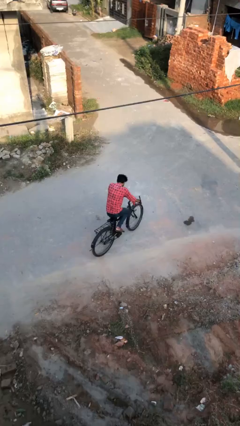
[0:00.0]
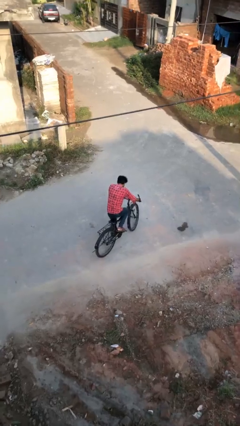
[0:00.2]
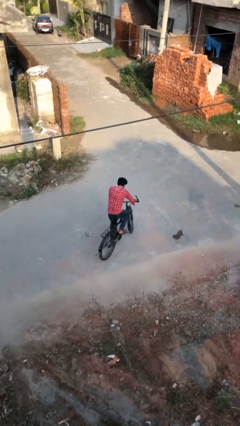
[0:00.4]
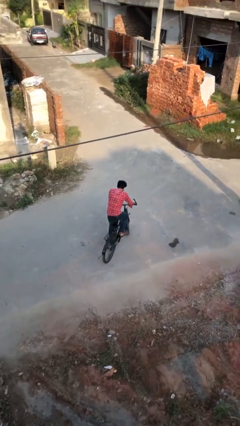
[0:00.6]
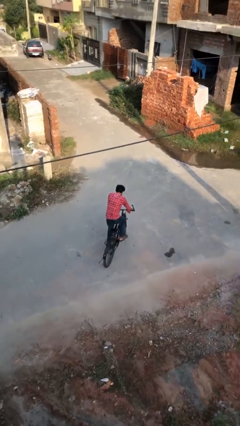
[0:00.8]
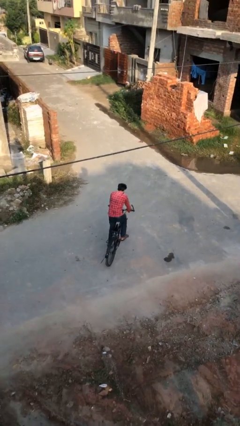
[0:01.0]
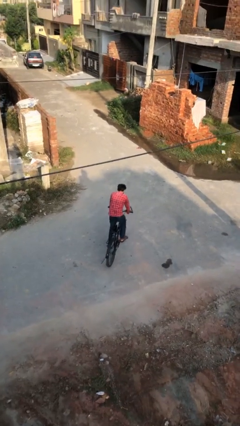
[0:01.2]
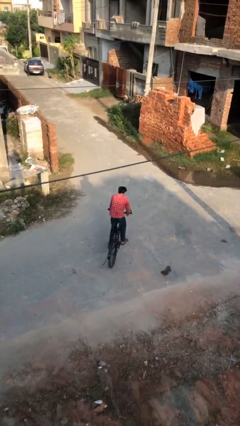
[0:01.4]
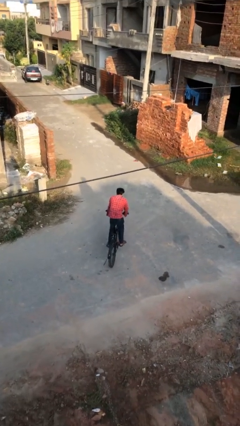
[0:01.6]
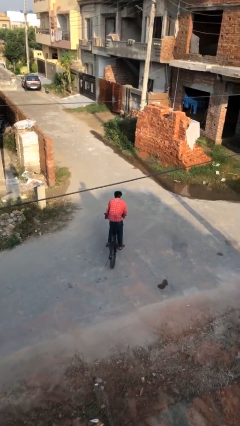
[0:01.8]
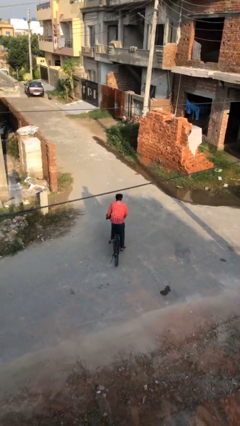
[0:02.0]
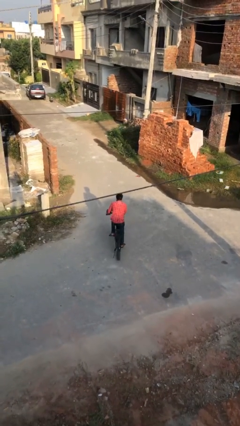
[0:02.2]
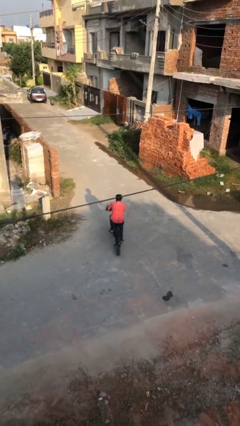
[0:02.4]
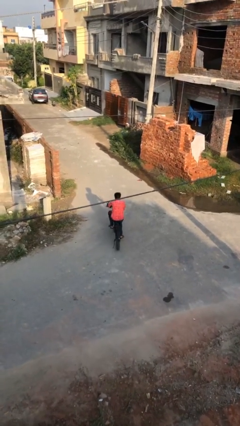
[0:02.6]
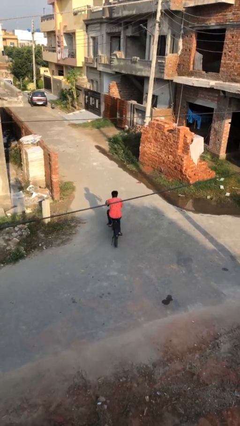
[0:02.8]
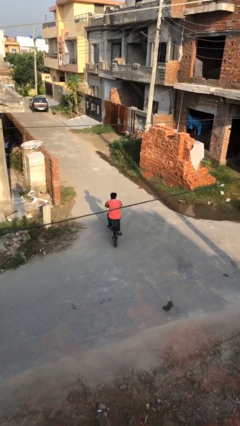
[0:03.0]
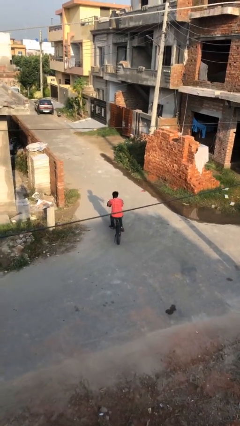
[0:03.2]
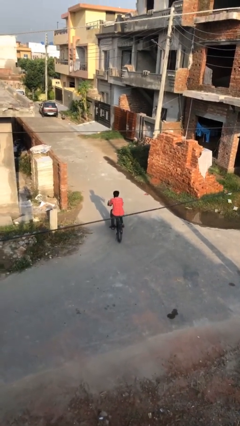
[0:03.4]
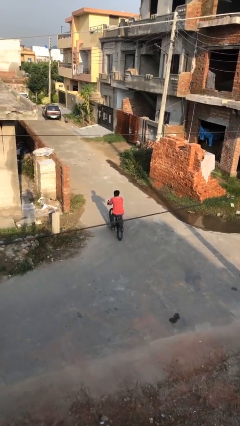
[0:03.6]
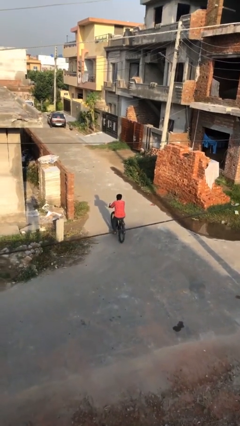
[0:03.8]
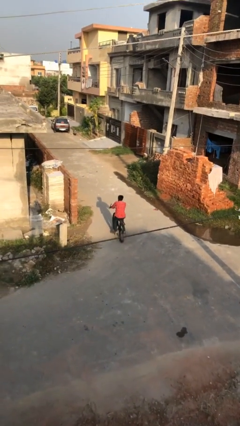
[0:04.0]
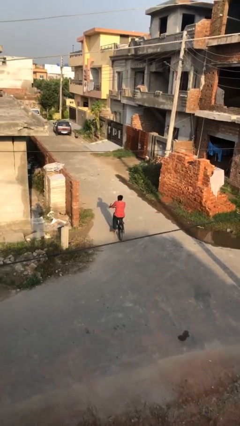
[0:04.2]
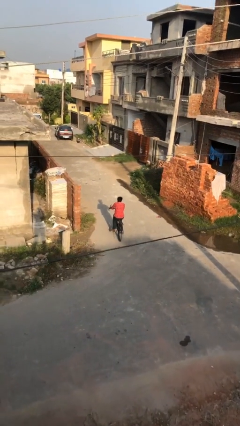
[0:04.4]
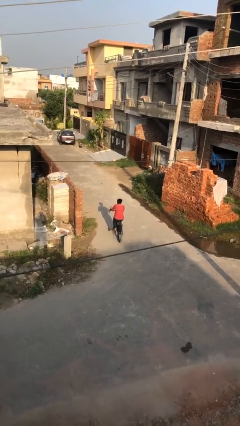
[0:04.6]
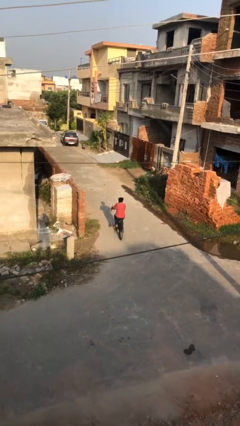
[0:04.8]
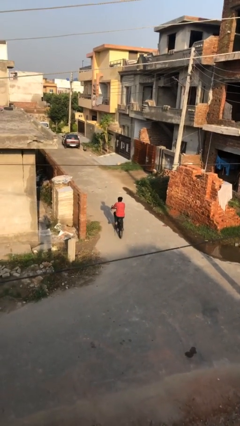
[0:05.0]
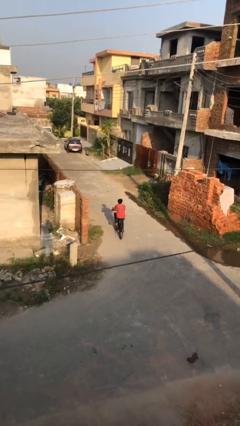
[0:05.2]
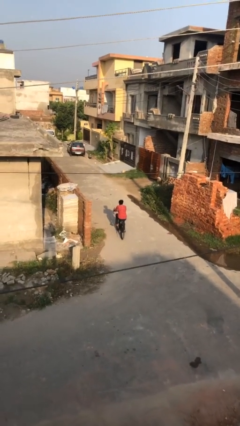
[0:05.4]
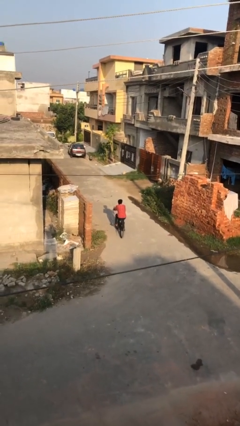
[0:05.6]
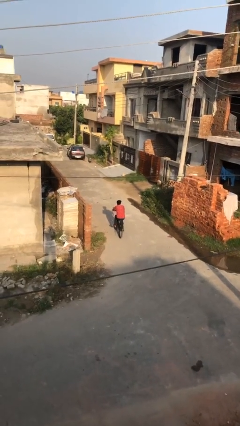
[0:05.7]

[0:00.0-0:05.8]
person rides bicycle

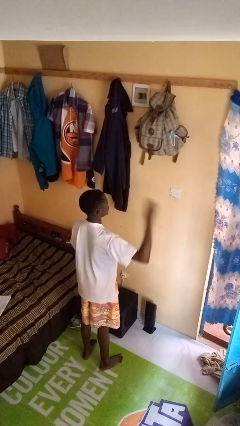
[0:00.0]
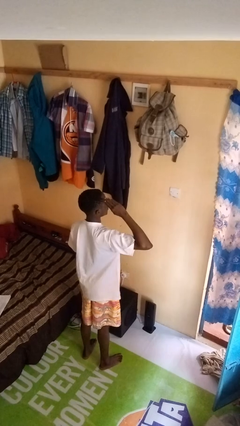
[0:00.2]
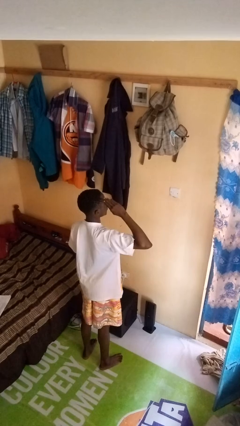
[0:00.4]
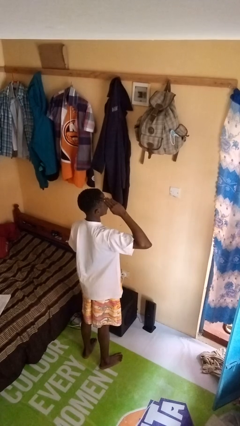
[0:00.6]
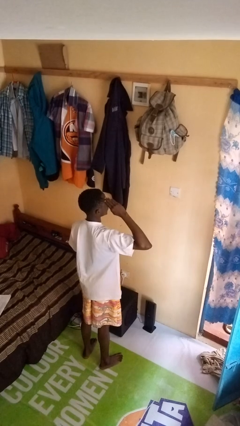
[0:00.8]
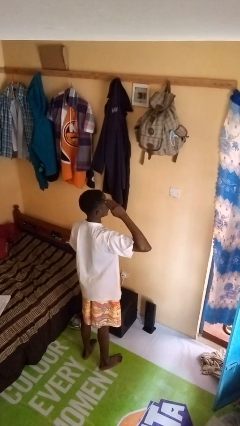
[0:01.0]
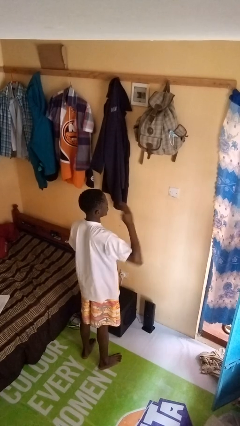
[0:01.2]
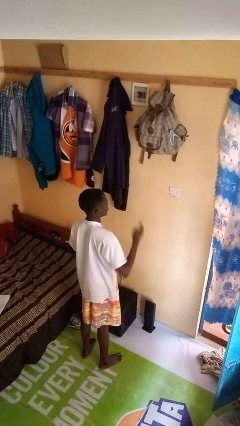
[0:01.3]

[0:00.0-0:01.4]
person salutes

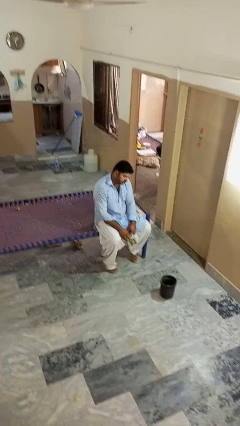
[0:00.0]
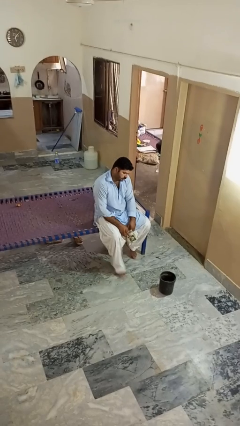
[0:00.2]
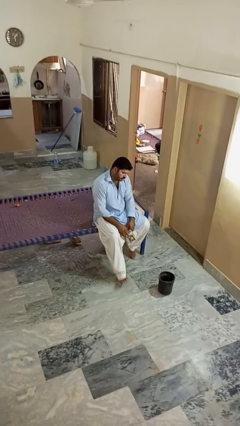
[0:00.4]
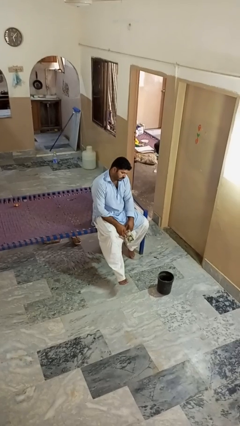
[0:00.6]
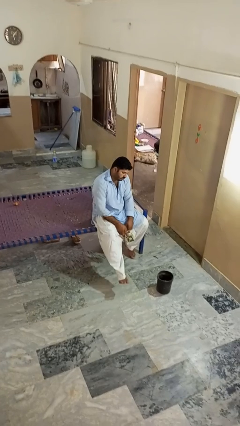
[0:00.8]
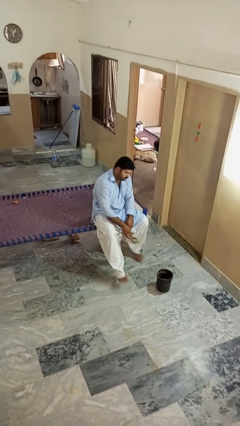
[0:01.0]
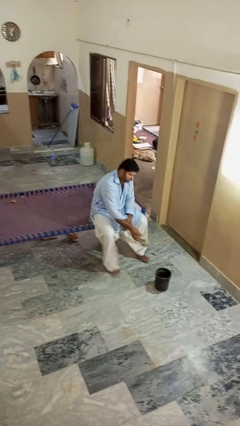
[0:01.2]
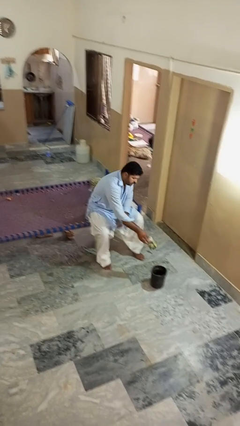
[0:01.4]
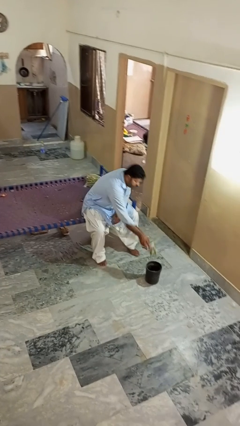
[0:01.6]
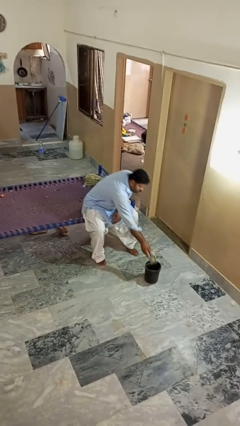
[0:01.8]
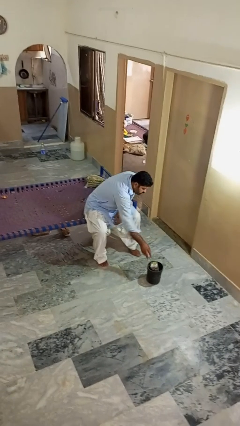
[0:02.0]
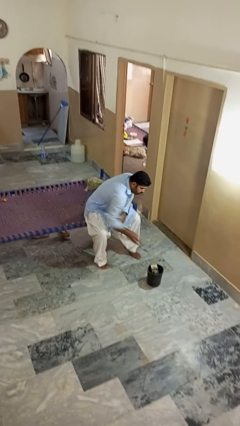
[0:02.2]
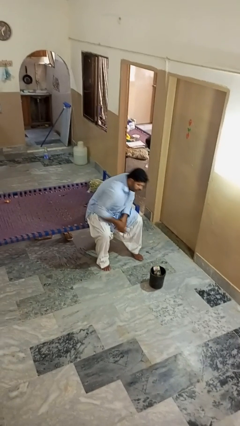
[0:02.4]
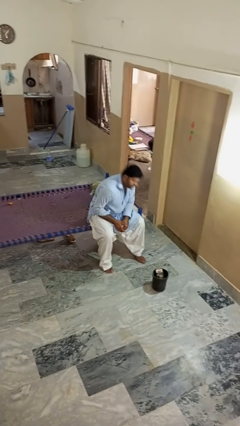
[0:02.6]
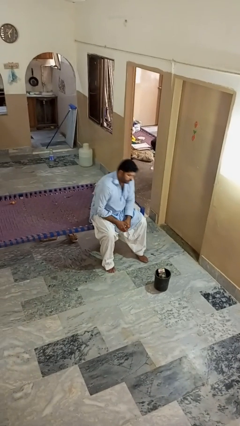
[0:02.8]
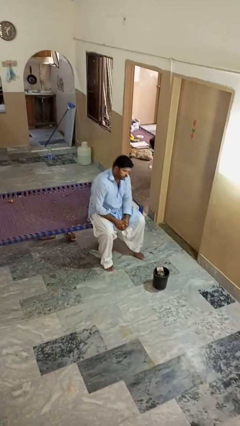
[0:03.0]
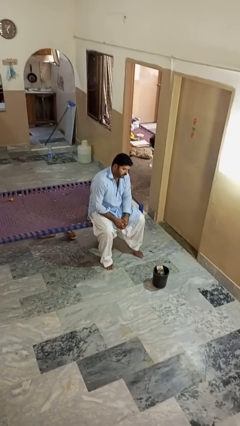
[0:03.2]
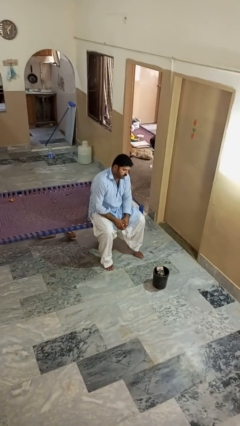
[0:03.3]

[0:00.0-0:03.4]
person puts object into basket

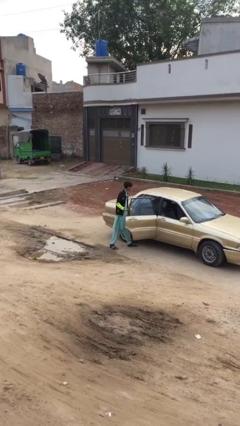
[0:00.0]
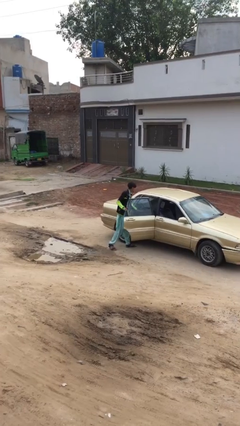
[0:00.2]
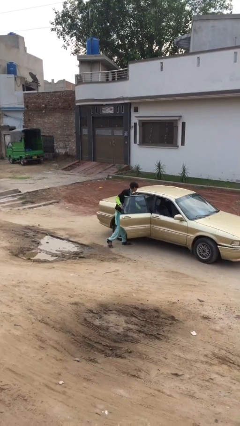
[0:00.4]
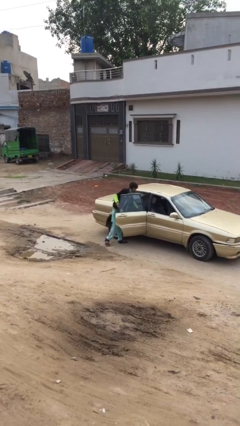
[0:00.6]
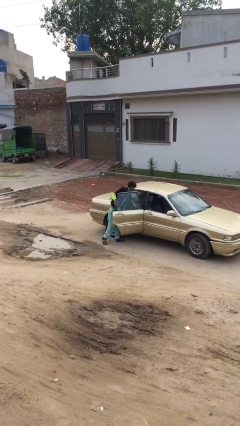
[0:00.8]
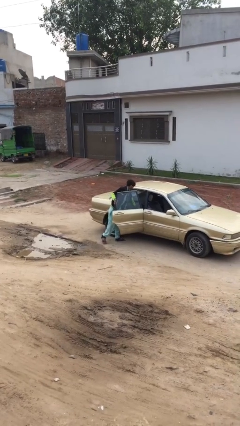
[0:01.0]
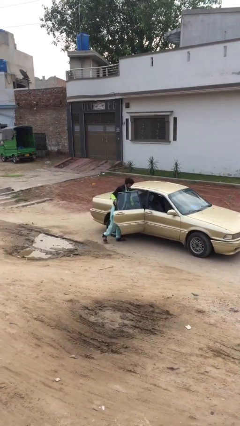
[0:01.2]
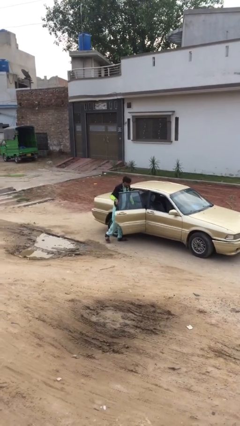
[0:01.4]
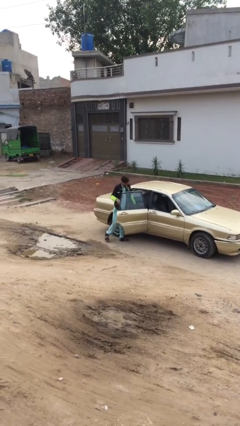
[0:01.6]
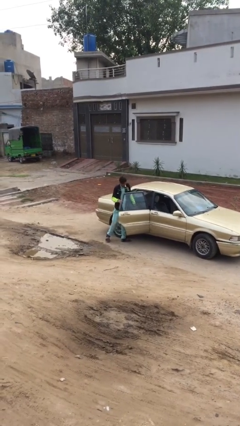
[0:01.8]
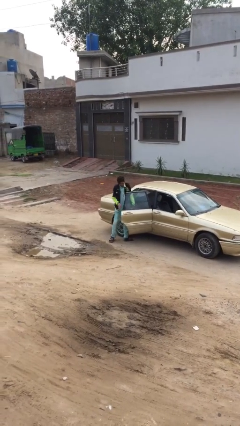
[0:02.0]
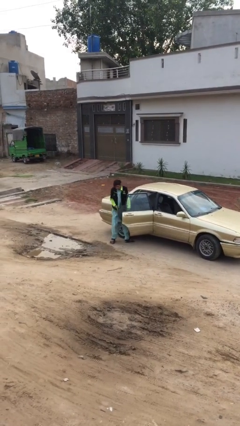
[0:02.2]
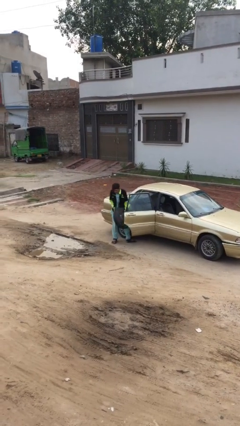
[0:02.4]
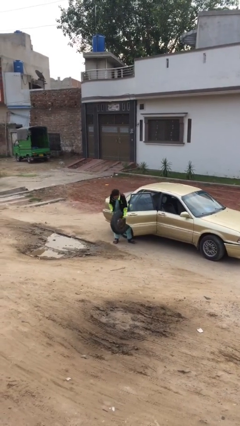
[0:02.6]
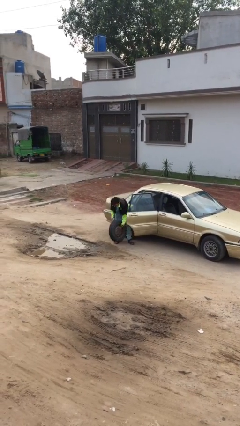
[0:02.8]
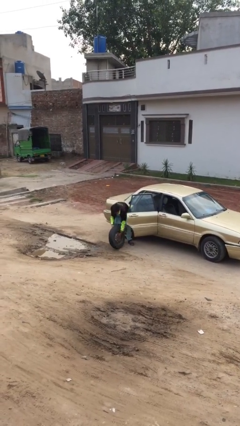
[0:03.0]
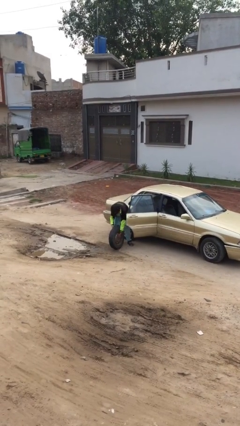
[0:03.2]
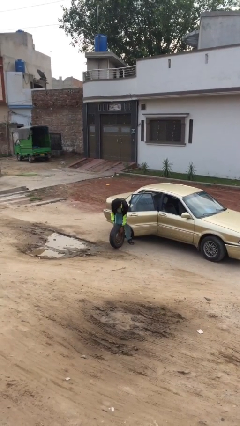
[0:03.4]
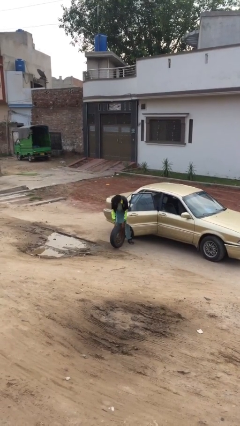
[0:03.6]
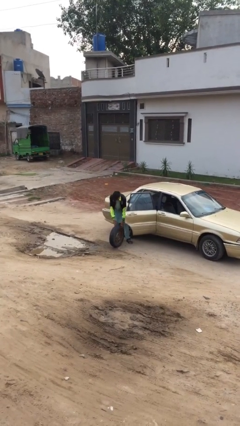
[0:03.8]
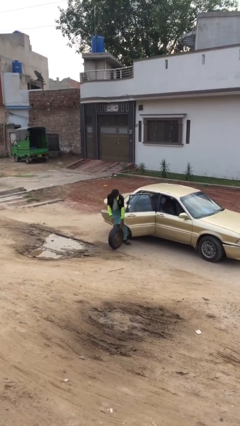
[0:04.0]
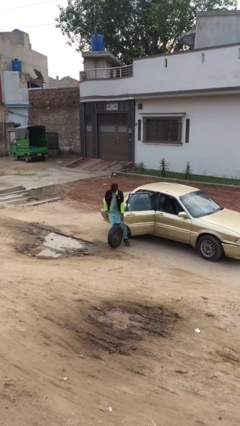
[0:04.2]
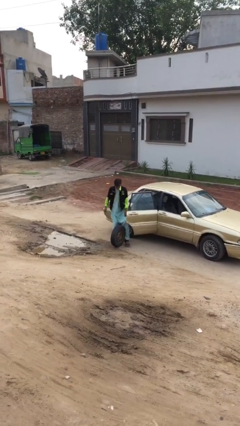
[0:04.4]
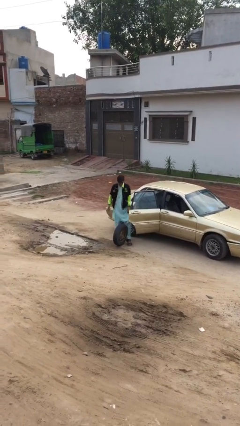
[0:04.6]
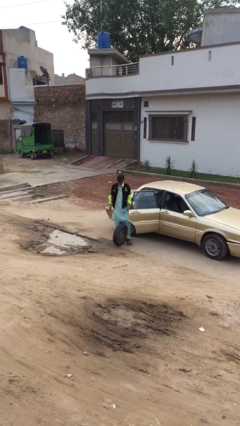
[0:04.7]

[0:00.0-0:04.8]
person unloads car

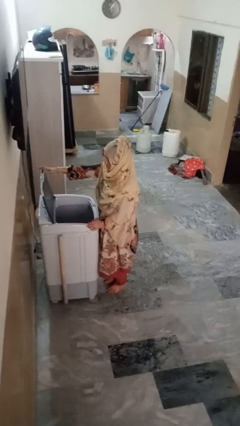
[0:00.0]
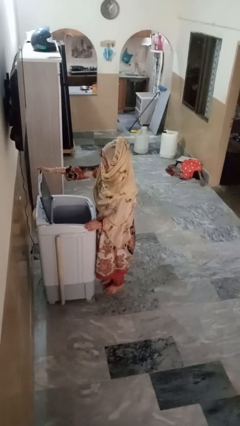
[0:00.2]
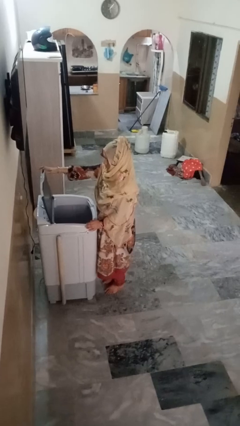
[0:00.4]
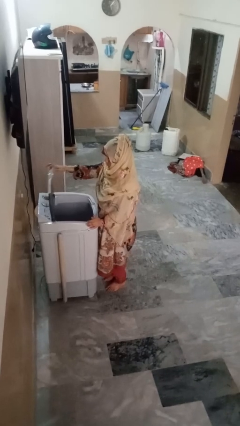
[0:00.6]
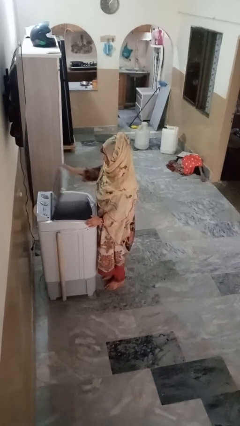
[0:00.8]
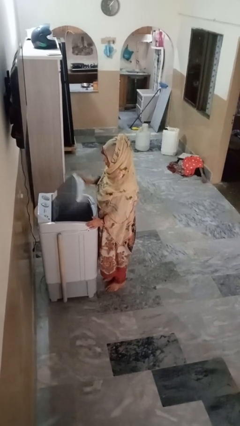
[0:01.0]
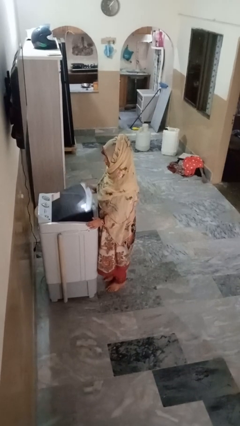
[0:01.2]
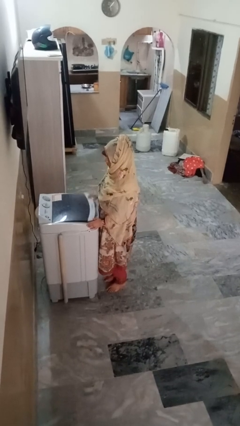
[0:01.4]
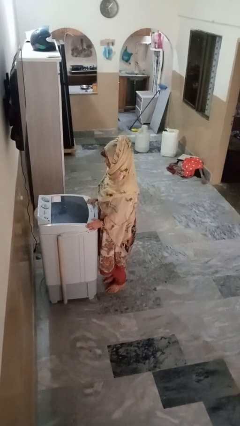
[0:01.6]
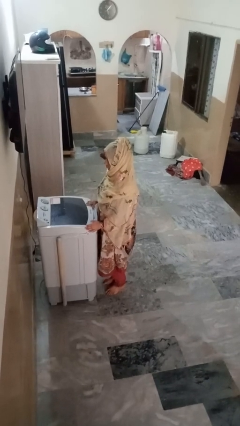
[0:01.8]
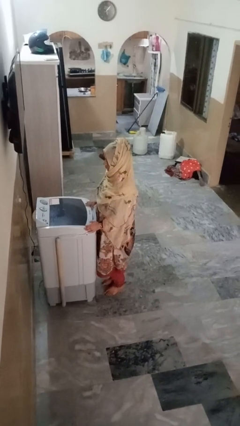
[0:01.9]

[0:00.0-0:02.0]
person closes clothes washer

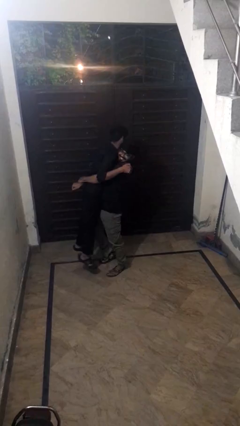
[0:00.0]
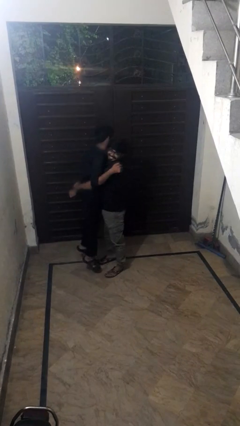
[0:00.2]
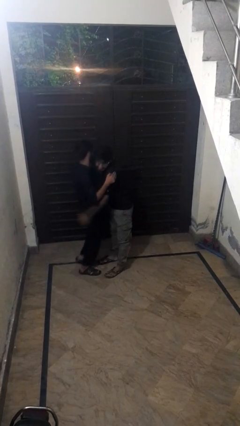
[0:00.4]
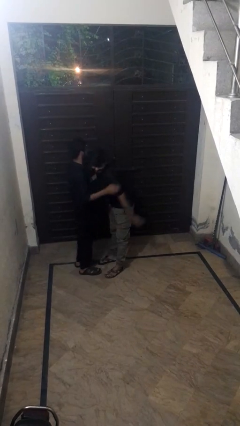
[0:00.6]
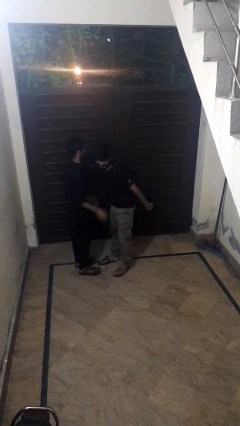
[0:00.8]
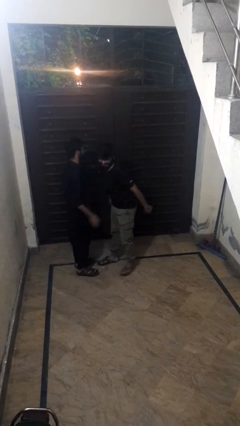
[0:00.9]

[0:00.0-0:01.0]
person puts down person
